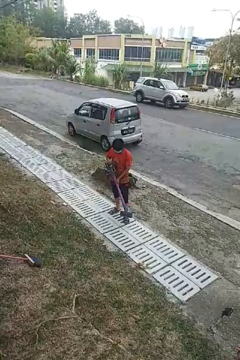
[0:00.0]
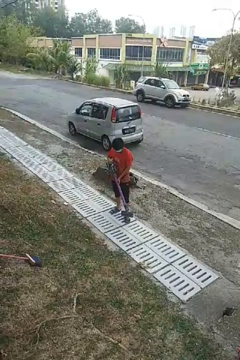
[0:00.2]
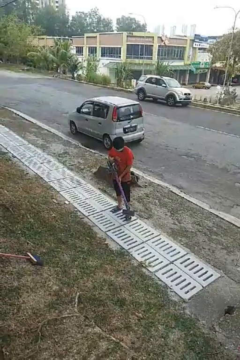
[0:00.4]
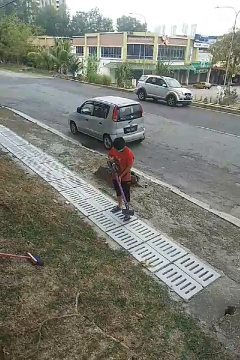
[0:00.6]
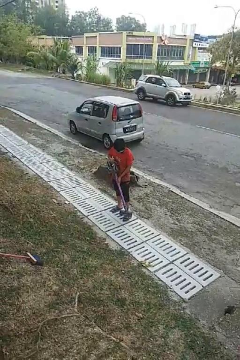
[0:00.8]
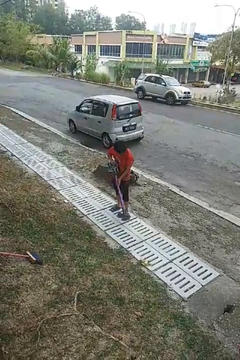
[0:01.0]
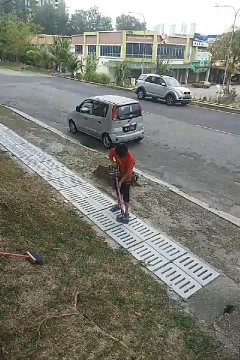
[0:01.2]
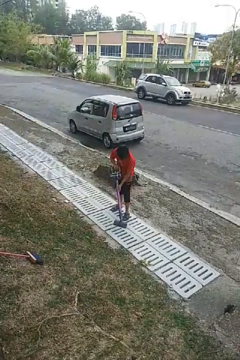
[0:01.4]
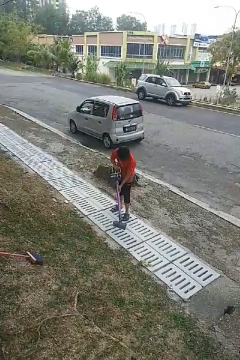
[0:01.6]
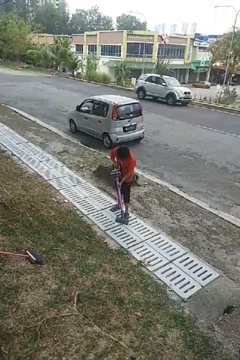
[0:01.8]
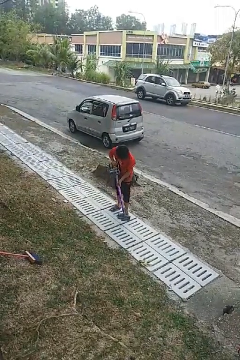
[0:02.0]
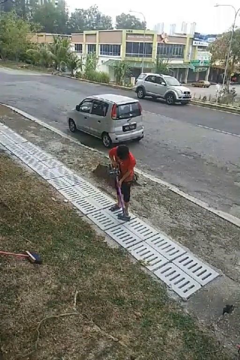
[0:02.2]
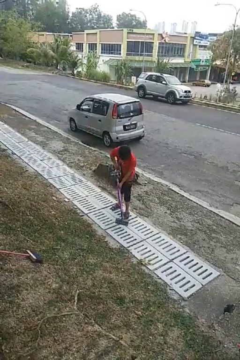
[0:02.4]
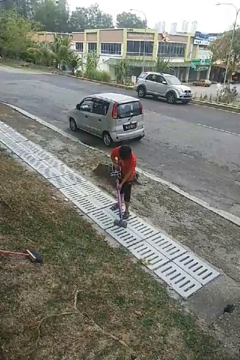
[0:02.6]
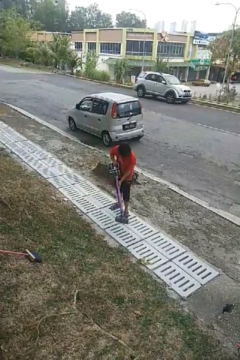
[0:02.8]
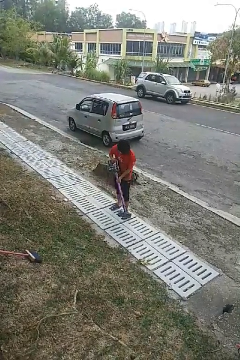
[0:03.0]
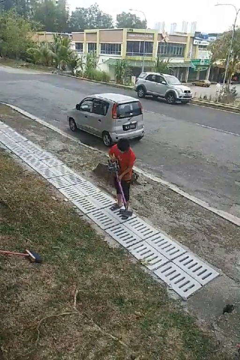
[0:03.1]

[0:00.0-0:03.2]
person vacuums carpet

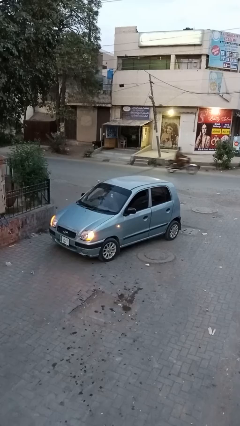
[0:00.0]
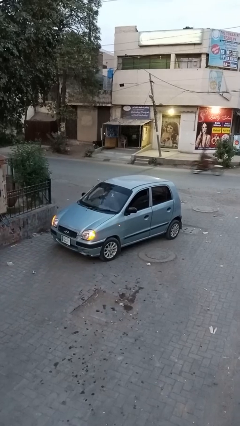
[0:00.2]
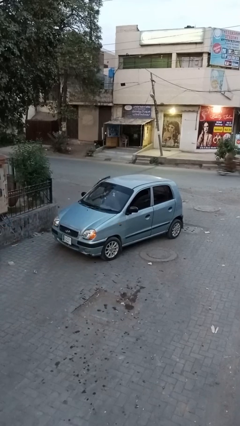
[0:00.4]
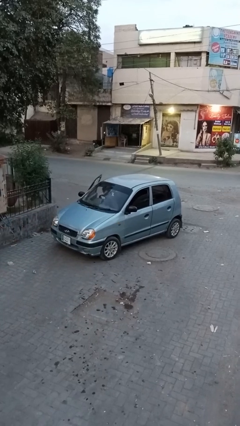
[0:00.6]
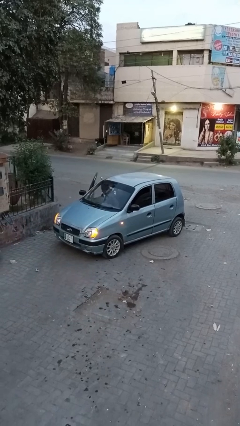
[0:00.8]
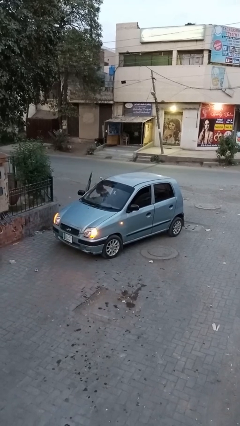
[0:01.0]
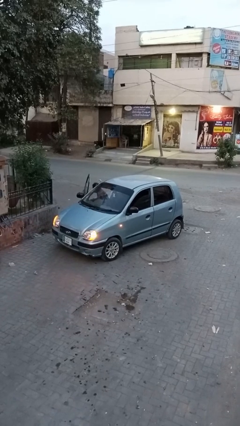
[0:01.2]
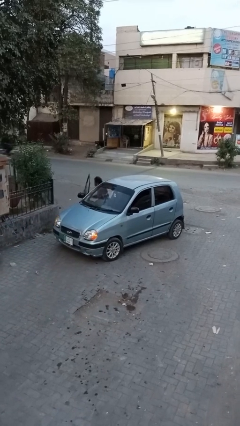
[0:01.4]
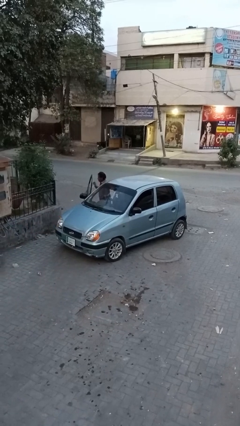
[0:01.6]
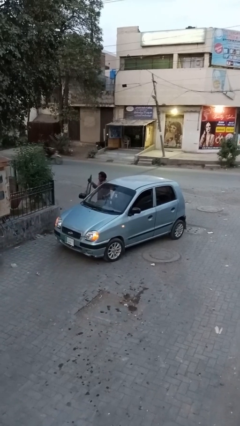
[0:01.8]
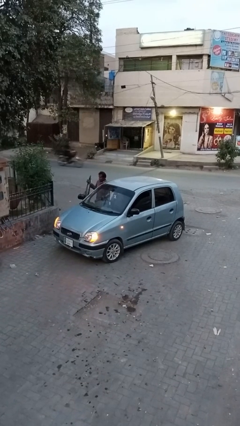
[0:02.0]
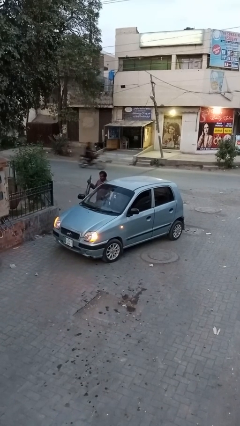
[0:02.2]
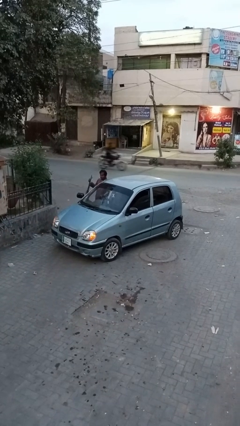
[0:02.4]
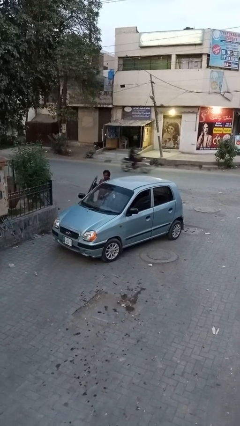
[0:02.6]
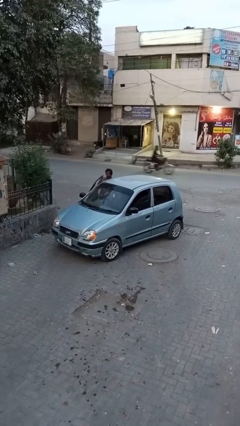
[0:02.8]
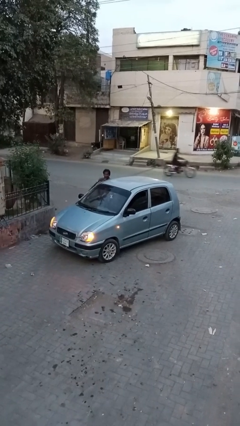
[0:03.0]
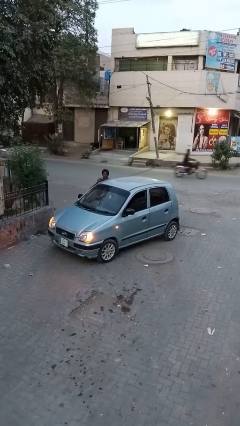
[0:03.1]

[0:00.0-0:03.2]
car drops off person

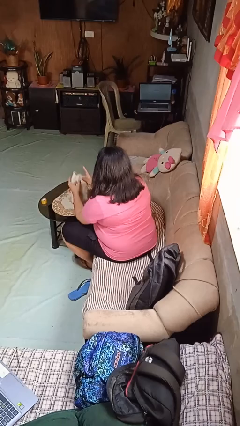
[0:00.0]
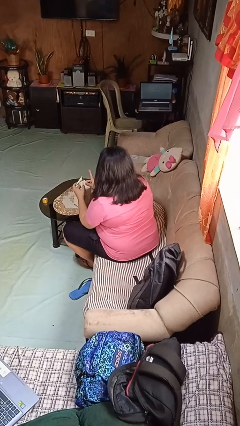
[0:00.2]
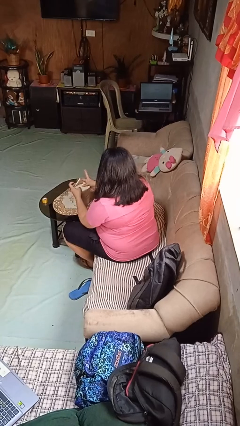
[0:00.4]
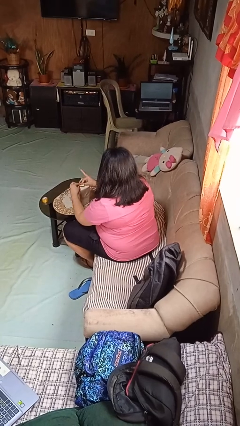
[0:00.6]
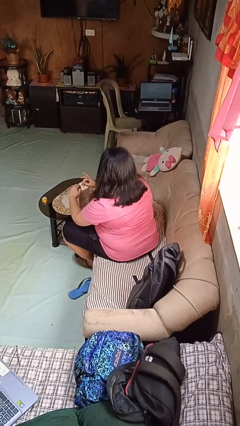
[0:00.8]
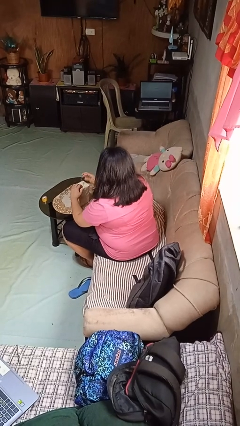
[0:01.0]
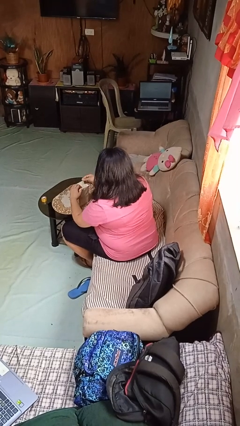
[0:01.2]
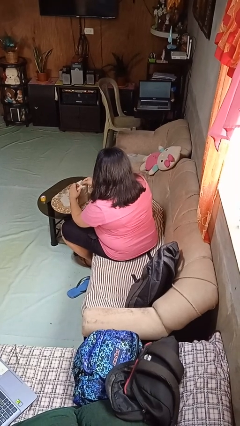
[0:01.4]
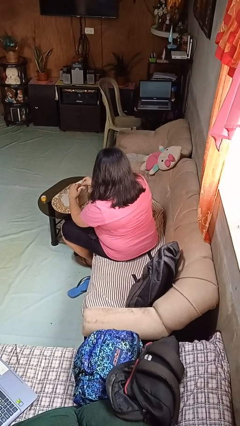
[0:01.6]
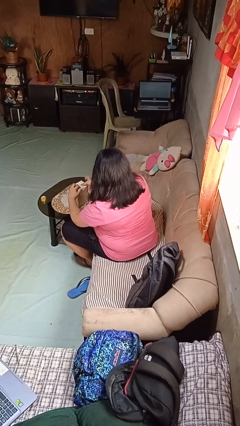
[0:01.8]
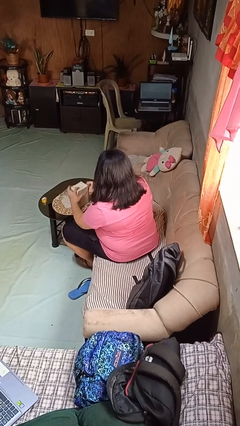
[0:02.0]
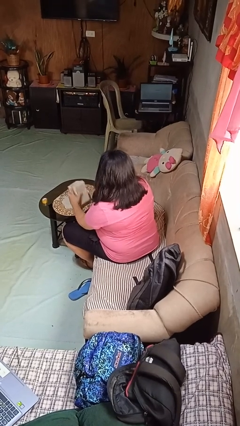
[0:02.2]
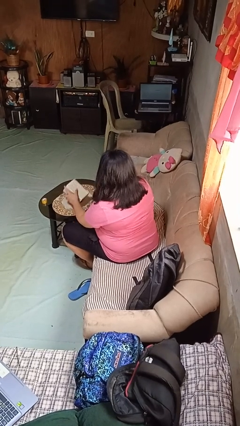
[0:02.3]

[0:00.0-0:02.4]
person wraps box

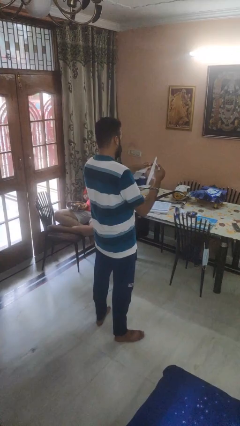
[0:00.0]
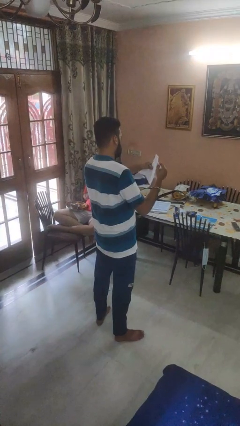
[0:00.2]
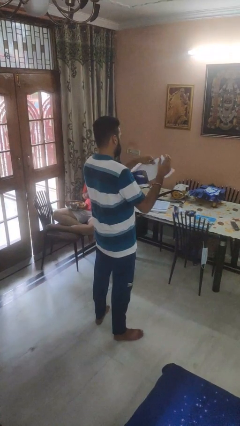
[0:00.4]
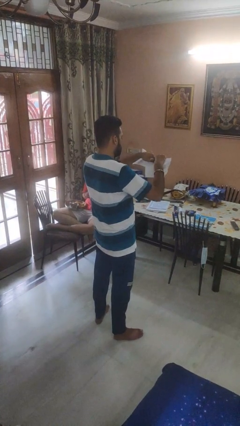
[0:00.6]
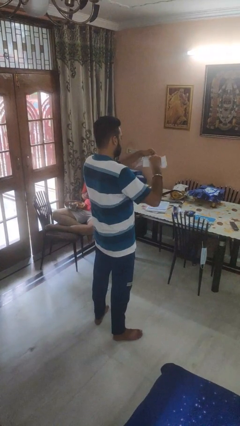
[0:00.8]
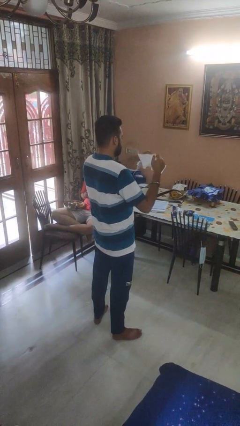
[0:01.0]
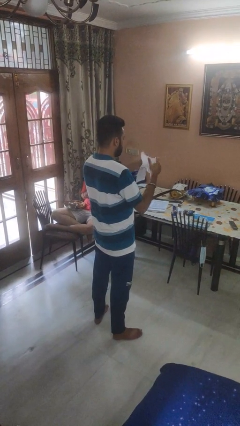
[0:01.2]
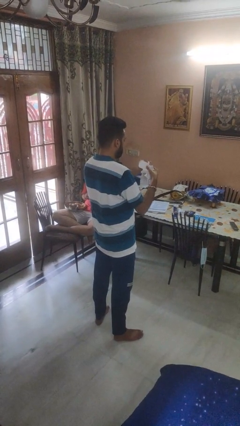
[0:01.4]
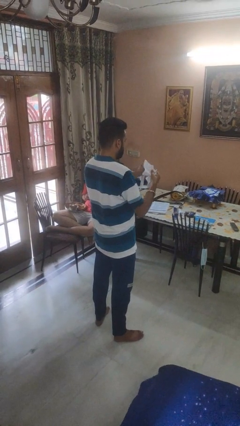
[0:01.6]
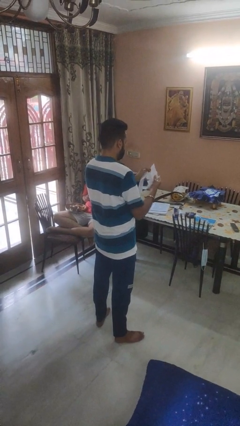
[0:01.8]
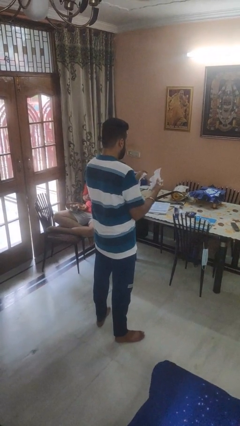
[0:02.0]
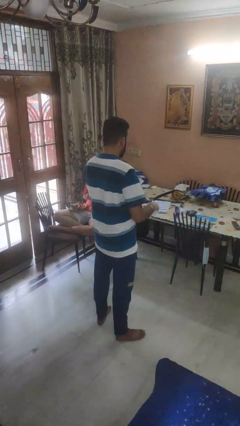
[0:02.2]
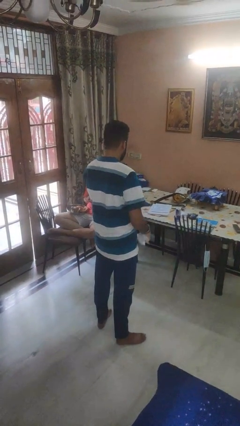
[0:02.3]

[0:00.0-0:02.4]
person tears paper

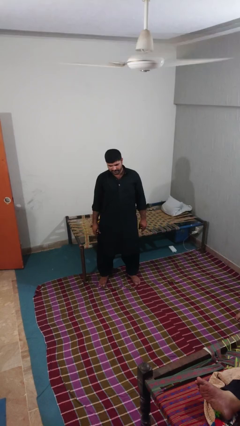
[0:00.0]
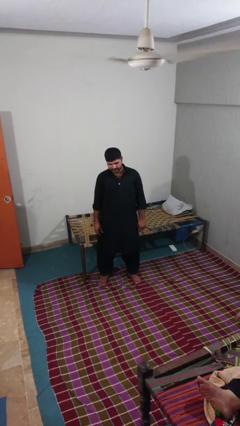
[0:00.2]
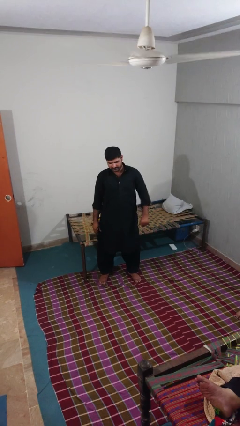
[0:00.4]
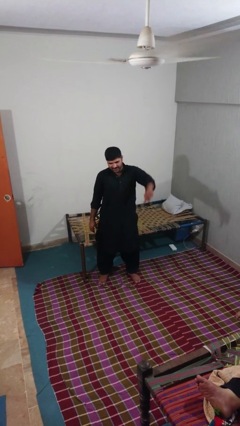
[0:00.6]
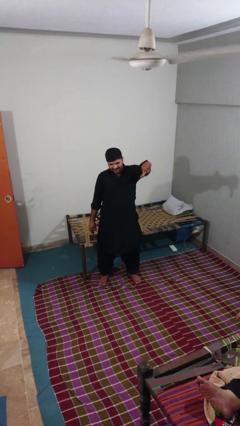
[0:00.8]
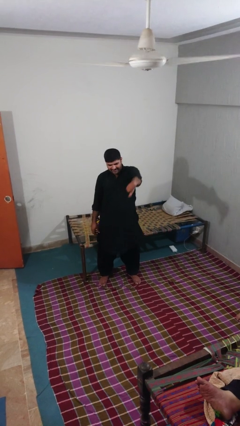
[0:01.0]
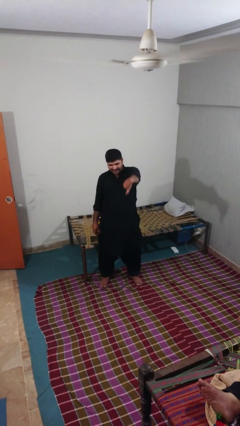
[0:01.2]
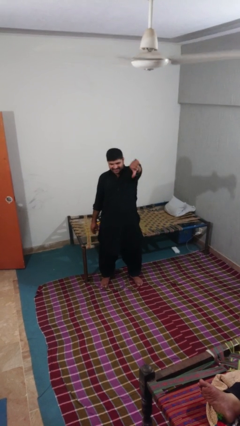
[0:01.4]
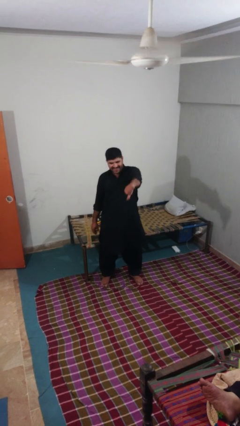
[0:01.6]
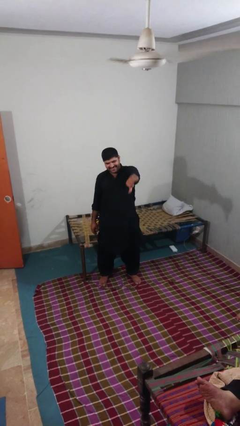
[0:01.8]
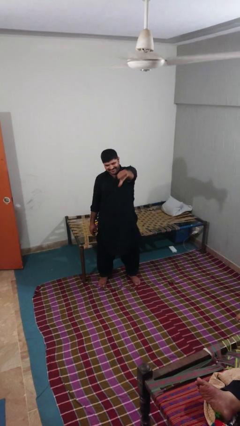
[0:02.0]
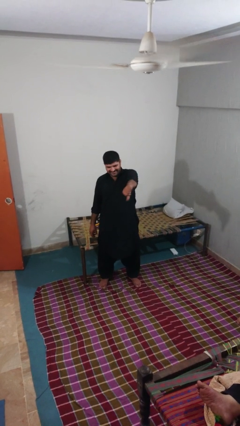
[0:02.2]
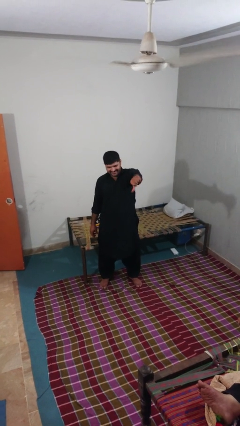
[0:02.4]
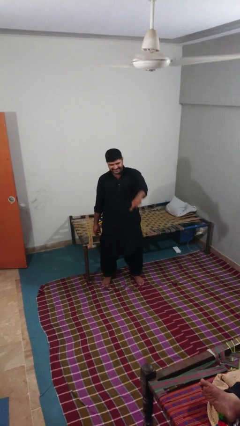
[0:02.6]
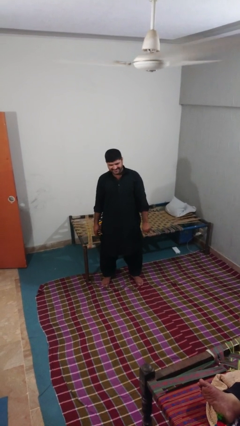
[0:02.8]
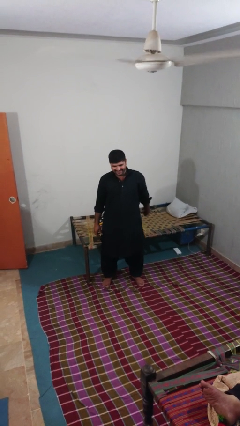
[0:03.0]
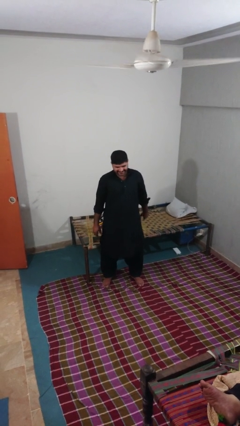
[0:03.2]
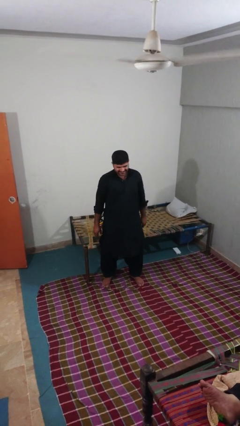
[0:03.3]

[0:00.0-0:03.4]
person gestures thumbs down

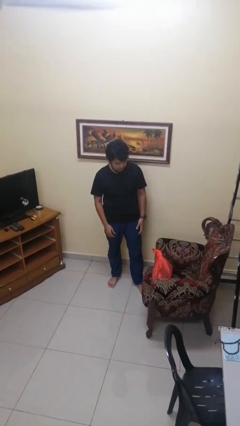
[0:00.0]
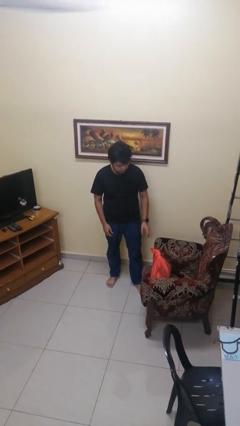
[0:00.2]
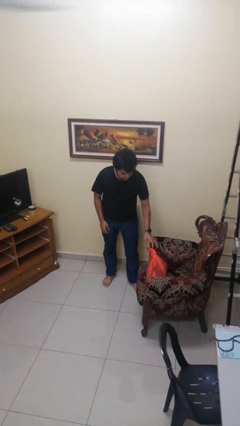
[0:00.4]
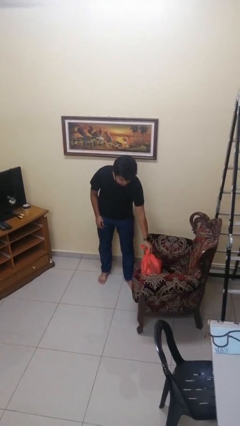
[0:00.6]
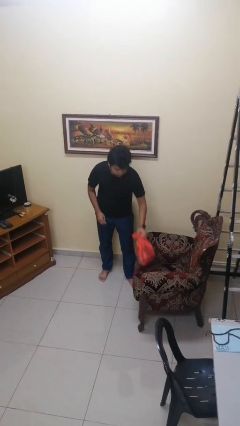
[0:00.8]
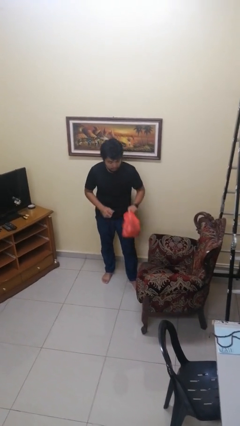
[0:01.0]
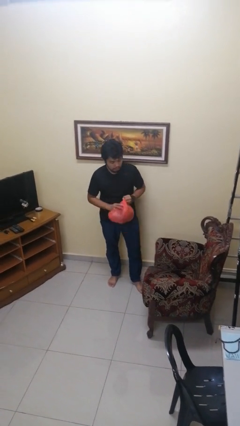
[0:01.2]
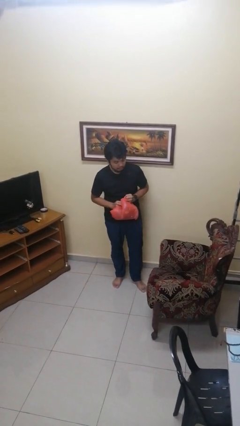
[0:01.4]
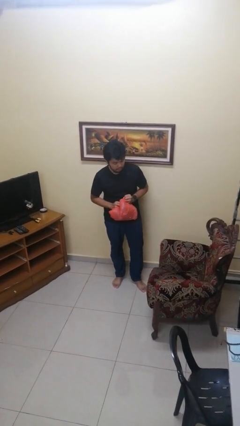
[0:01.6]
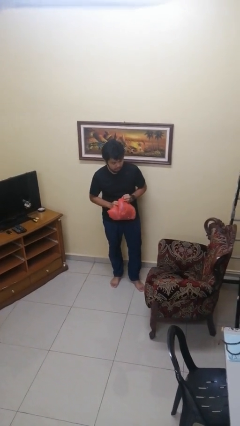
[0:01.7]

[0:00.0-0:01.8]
person picks up object from couch

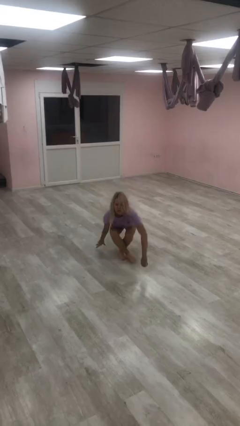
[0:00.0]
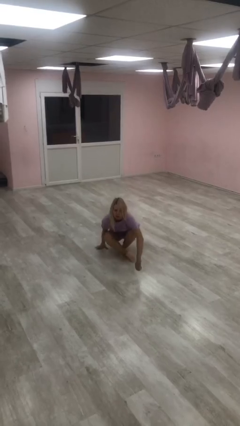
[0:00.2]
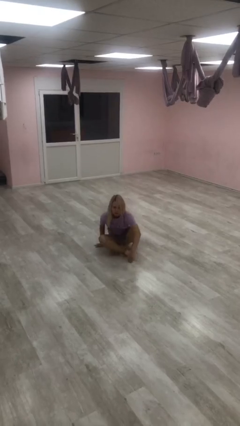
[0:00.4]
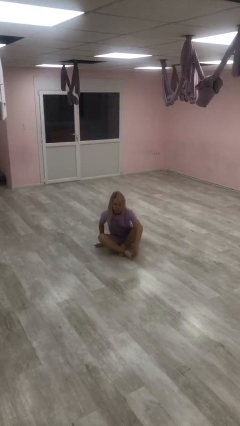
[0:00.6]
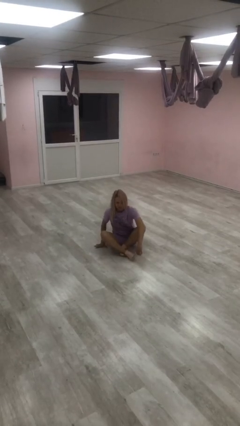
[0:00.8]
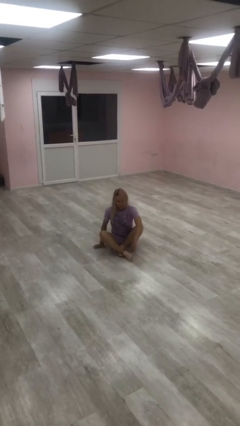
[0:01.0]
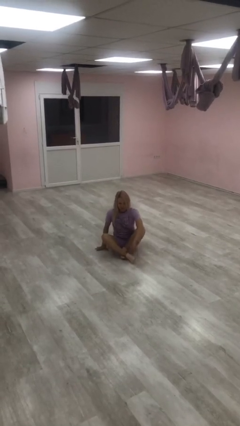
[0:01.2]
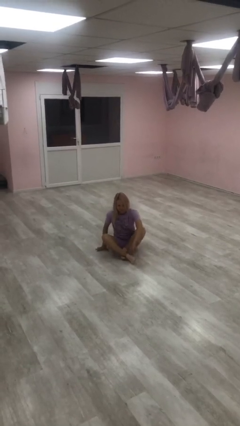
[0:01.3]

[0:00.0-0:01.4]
person sits crisscross
